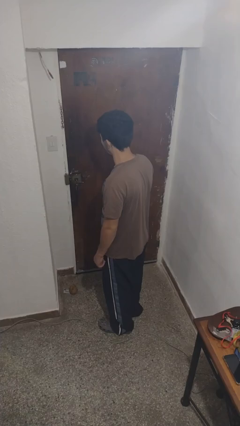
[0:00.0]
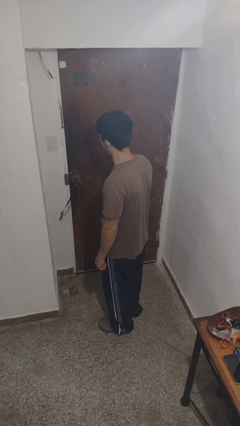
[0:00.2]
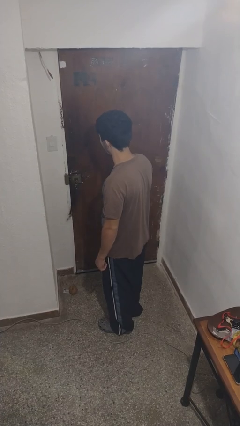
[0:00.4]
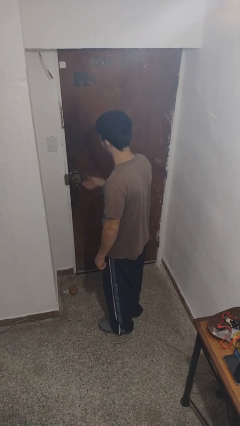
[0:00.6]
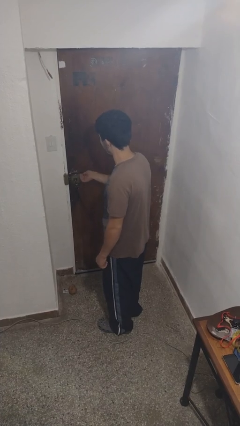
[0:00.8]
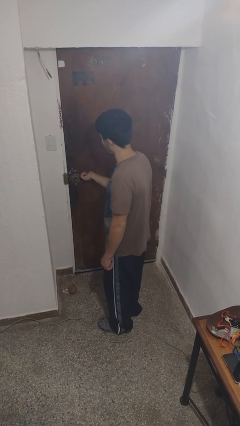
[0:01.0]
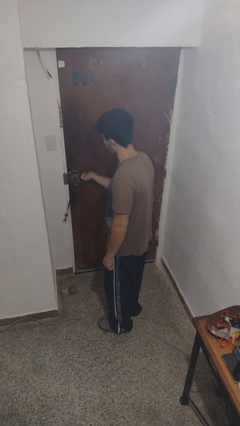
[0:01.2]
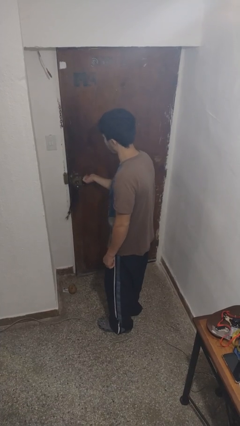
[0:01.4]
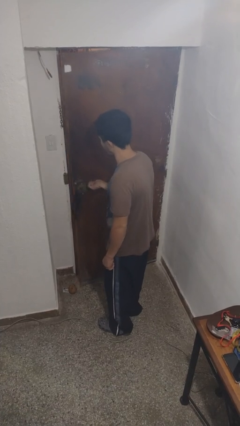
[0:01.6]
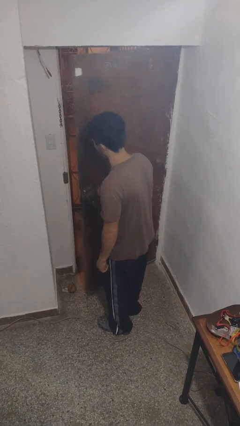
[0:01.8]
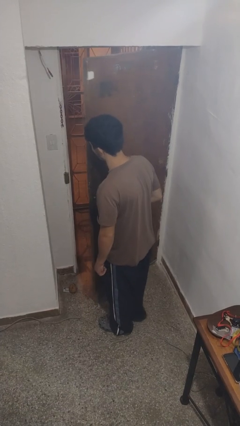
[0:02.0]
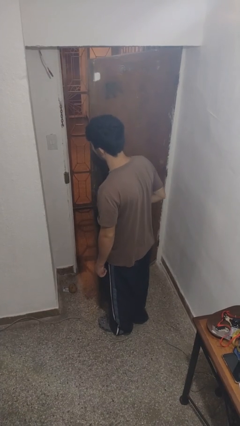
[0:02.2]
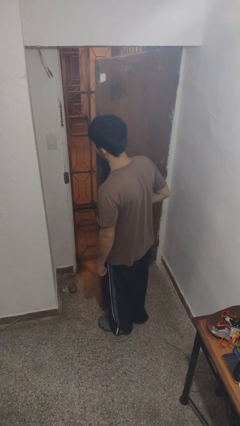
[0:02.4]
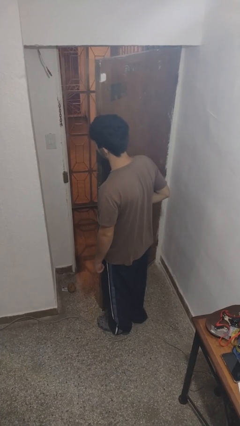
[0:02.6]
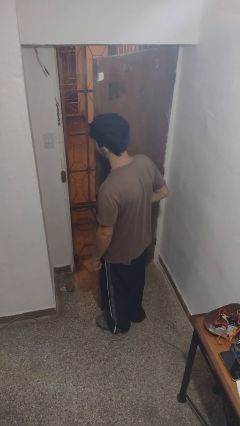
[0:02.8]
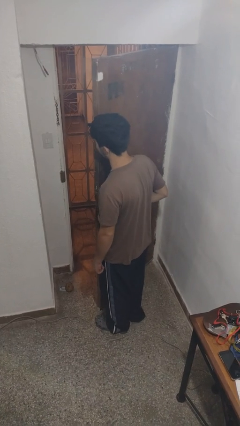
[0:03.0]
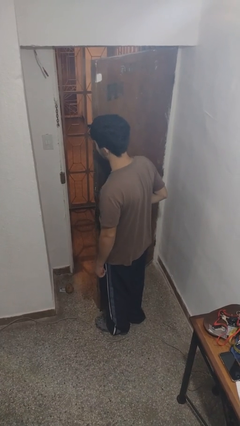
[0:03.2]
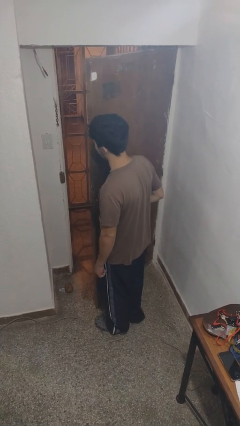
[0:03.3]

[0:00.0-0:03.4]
person opens facility door

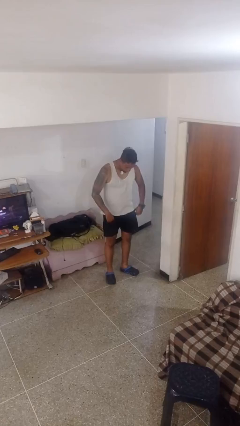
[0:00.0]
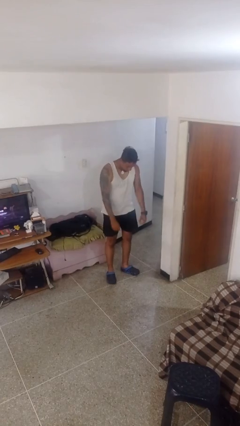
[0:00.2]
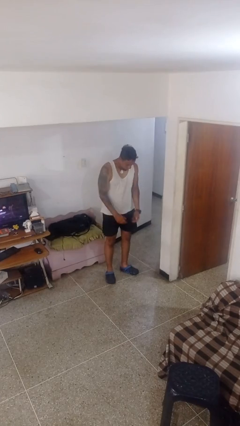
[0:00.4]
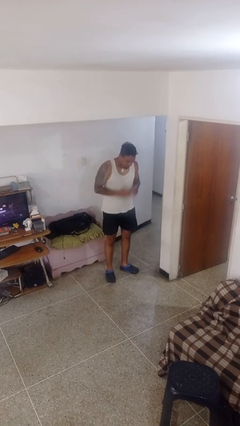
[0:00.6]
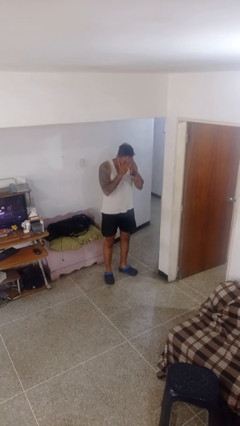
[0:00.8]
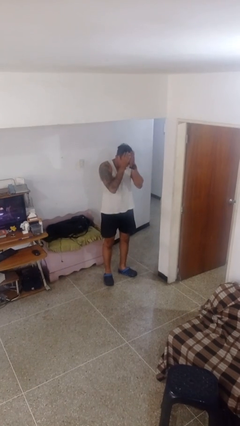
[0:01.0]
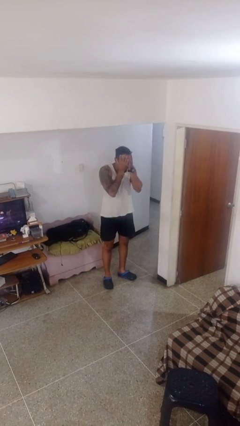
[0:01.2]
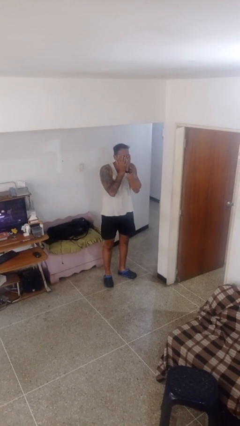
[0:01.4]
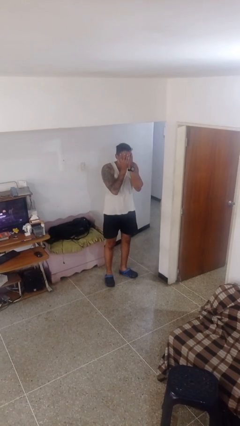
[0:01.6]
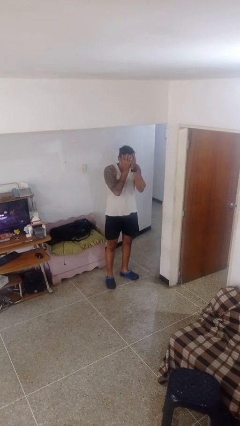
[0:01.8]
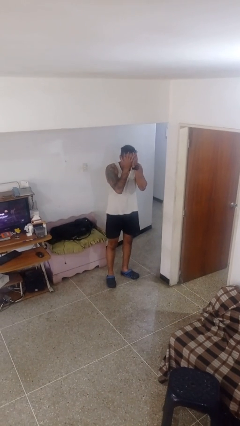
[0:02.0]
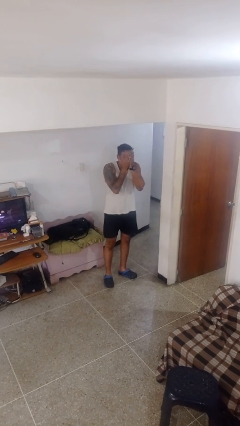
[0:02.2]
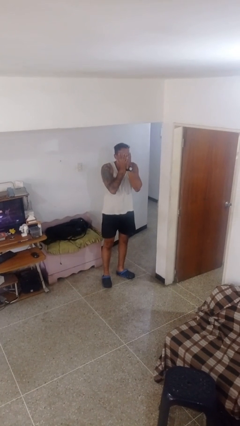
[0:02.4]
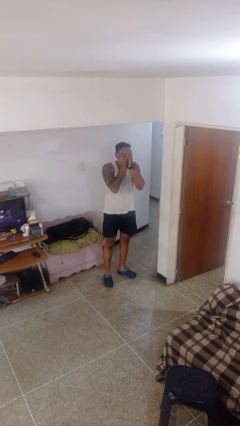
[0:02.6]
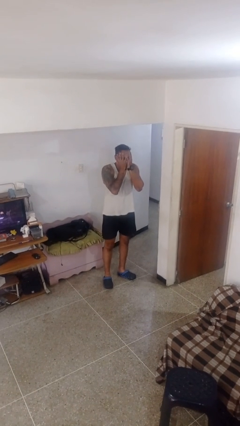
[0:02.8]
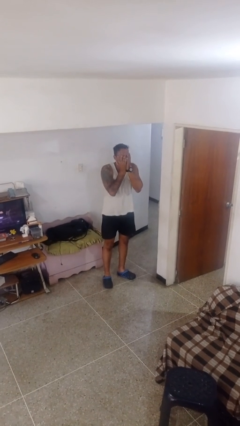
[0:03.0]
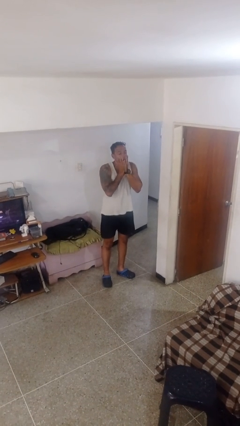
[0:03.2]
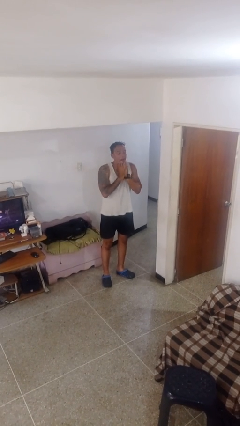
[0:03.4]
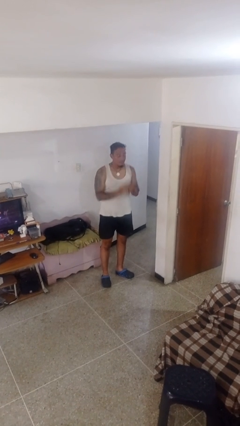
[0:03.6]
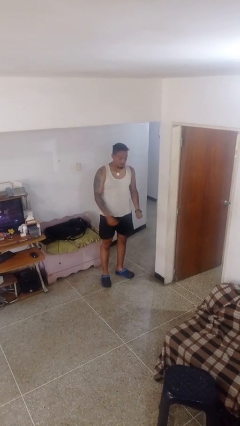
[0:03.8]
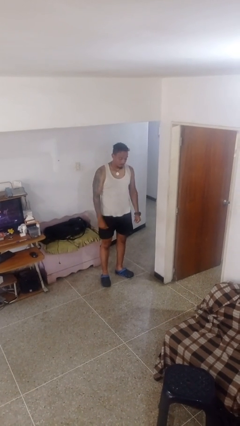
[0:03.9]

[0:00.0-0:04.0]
person scratches face

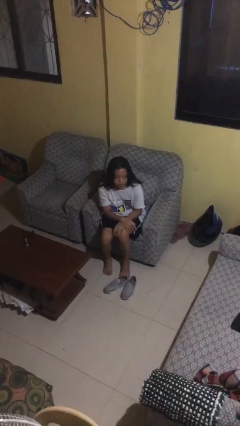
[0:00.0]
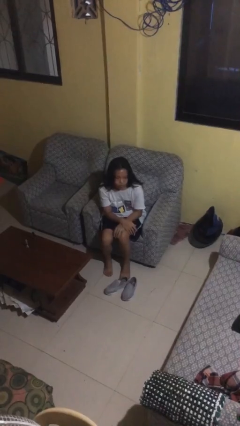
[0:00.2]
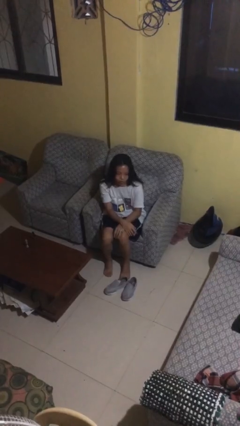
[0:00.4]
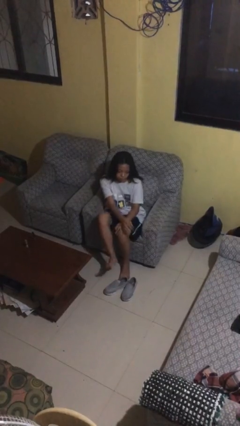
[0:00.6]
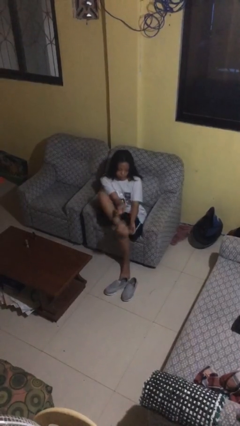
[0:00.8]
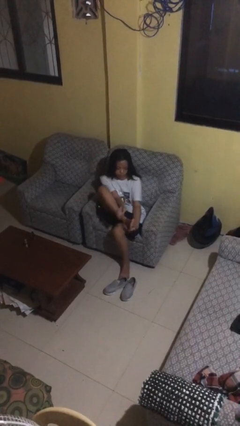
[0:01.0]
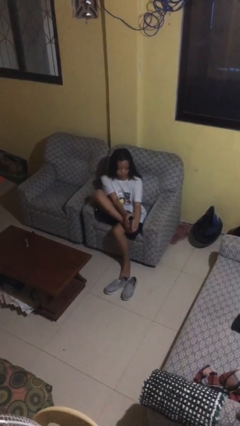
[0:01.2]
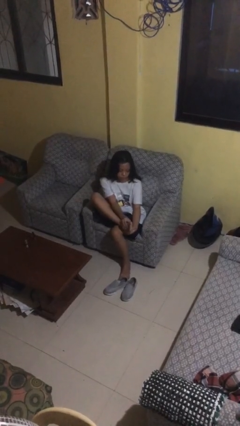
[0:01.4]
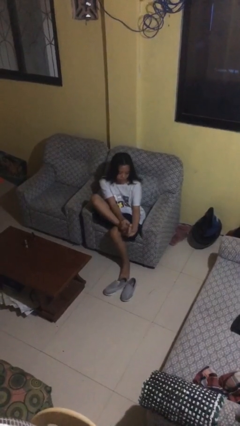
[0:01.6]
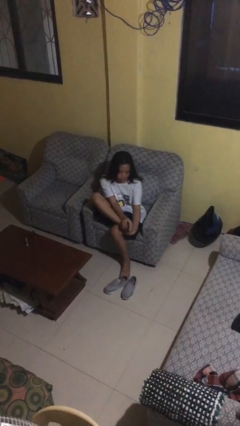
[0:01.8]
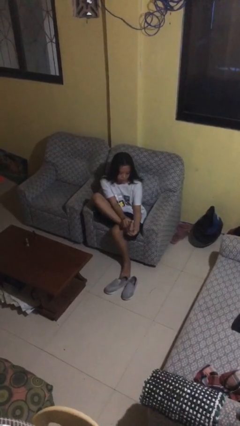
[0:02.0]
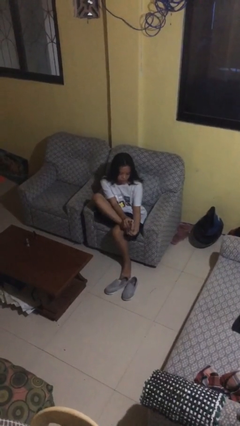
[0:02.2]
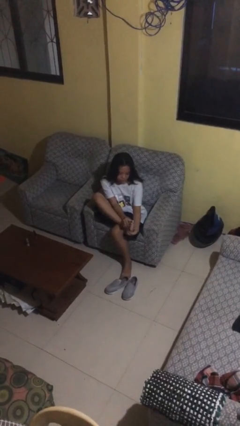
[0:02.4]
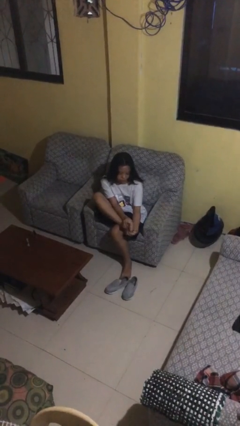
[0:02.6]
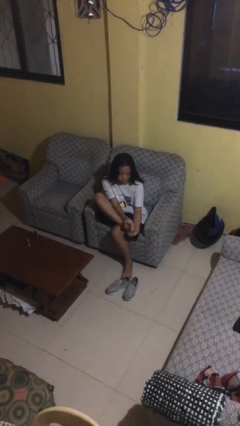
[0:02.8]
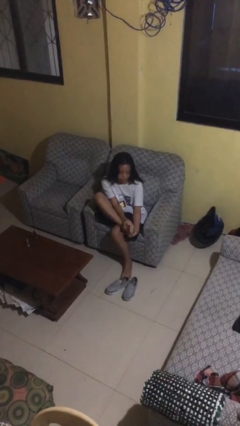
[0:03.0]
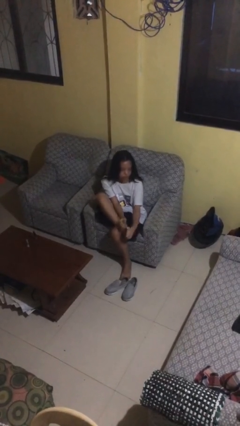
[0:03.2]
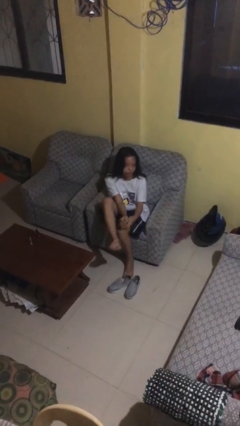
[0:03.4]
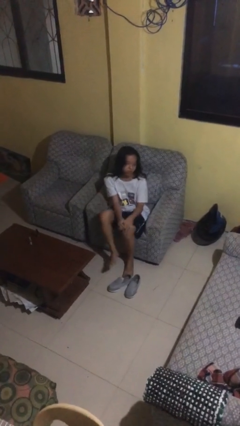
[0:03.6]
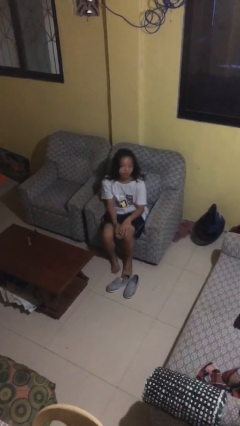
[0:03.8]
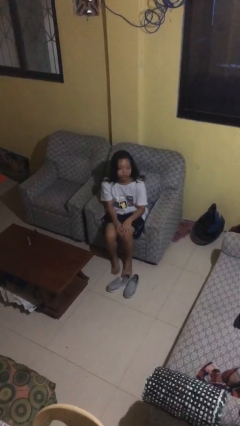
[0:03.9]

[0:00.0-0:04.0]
person rubs foot

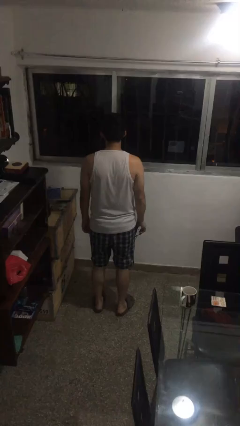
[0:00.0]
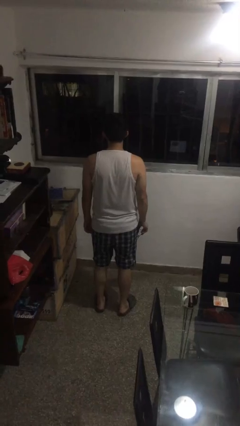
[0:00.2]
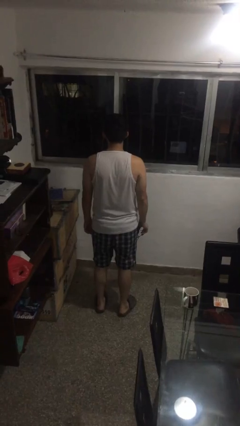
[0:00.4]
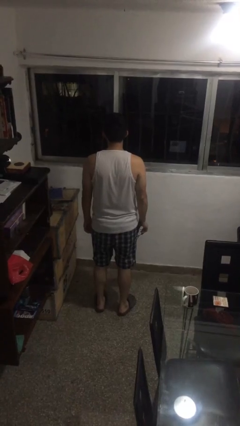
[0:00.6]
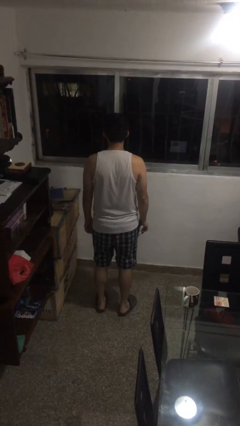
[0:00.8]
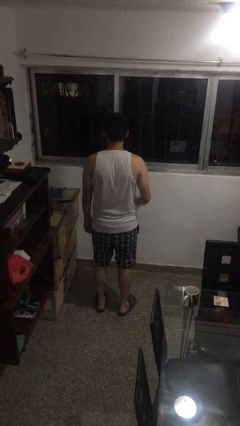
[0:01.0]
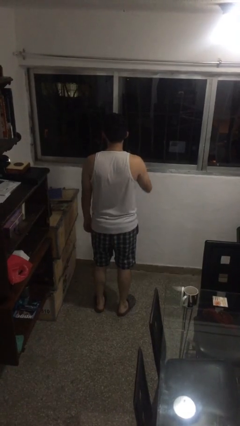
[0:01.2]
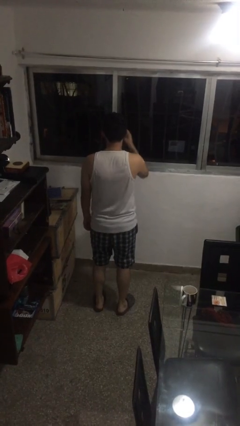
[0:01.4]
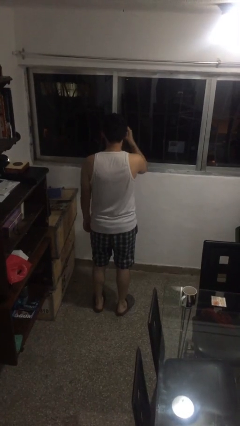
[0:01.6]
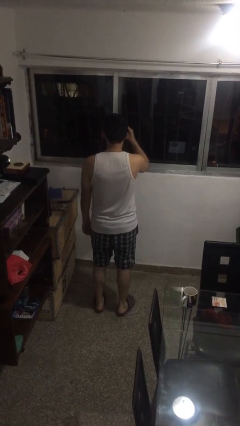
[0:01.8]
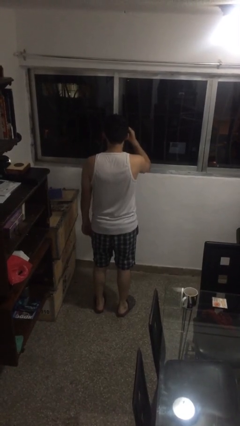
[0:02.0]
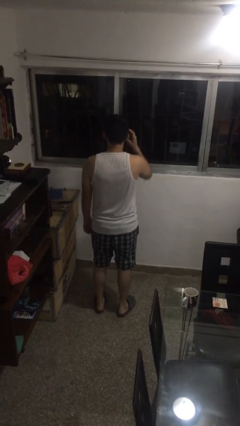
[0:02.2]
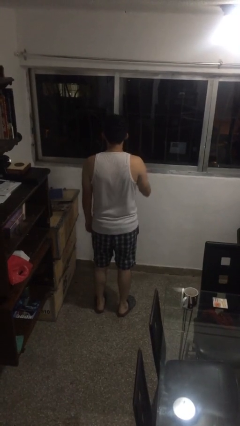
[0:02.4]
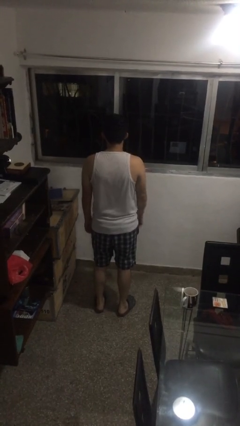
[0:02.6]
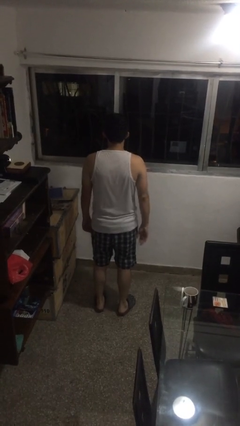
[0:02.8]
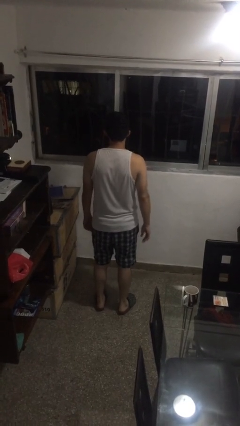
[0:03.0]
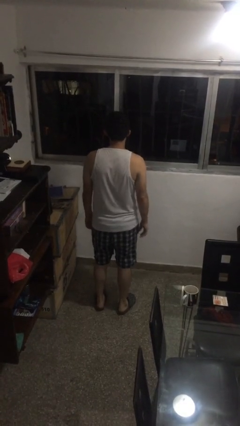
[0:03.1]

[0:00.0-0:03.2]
person puts on glasses

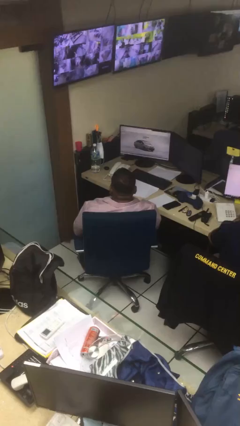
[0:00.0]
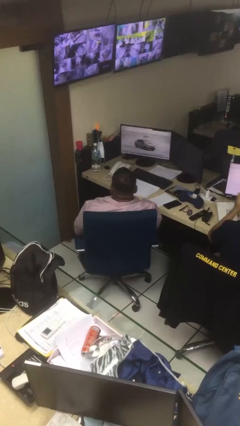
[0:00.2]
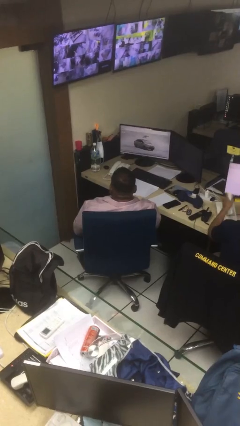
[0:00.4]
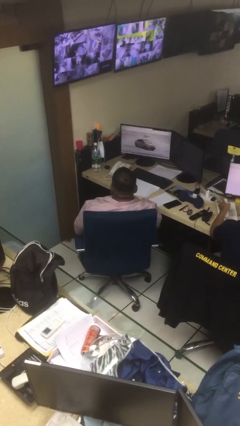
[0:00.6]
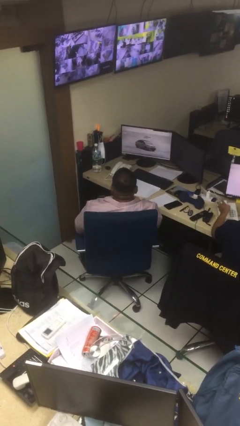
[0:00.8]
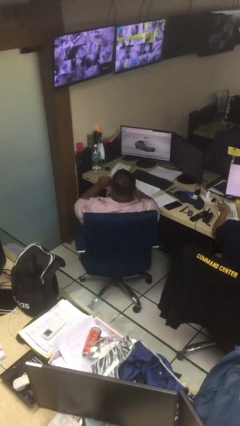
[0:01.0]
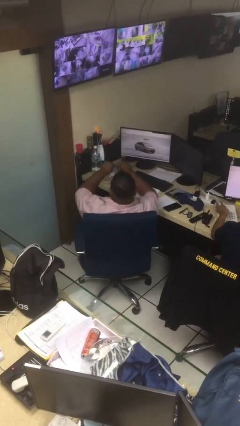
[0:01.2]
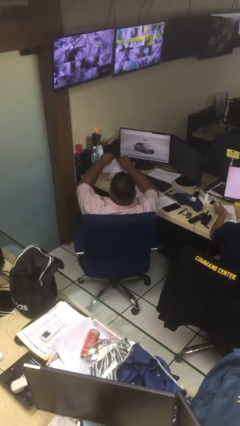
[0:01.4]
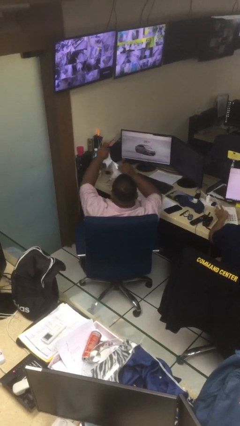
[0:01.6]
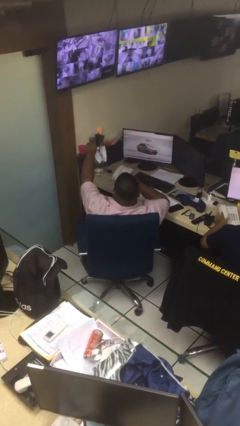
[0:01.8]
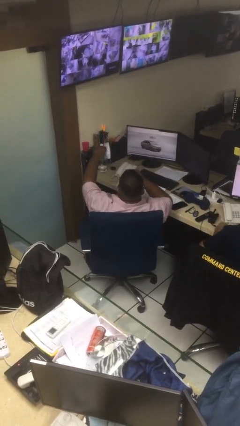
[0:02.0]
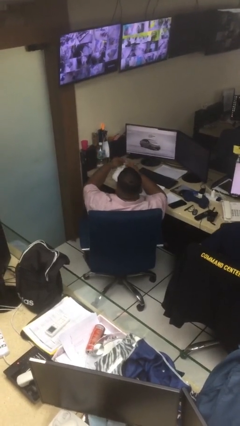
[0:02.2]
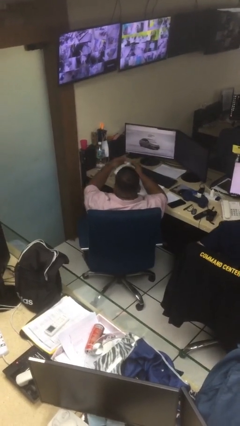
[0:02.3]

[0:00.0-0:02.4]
person tears paper

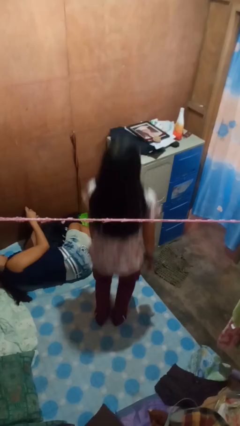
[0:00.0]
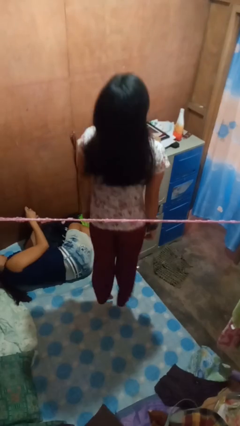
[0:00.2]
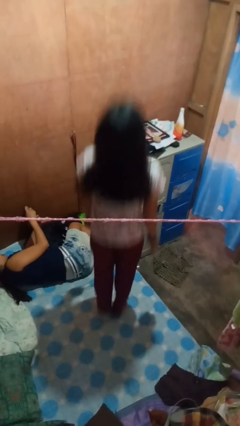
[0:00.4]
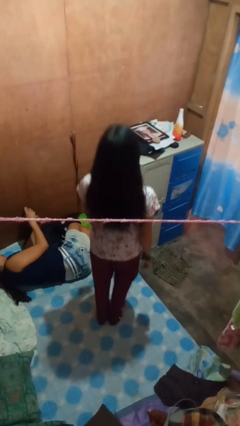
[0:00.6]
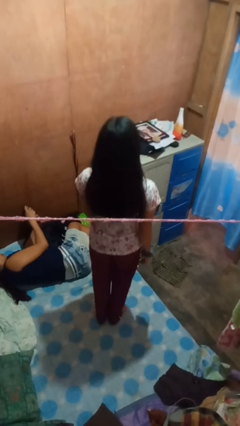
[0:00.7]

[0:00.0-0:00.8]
person jumps on bed
